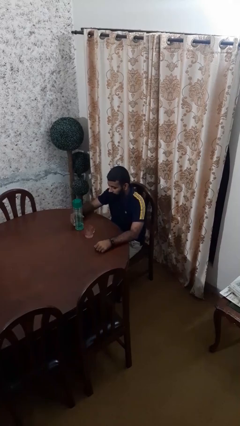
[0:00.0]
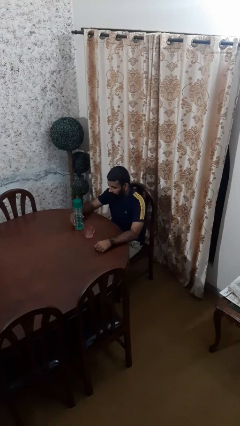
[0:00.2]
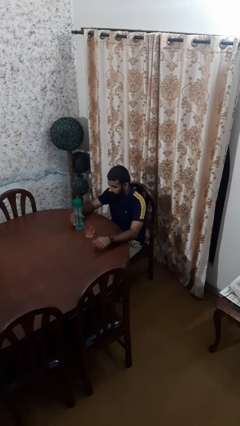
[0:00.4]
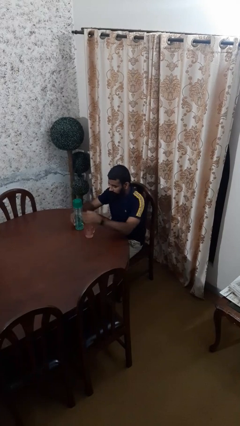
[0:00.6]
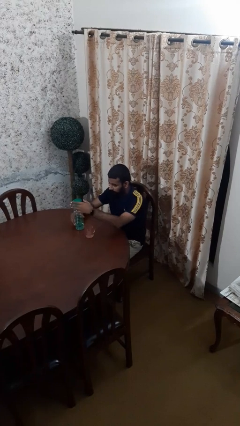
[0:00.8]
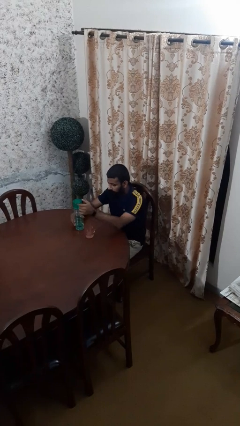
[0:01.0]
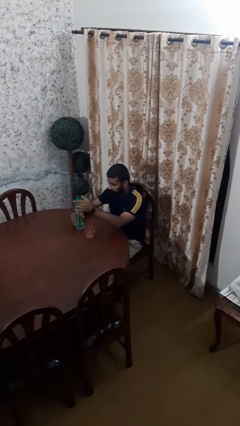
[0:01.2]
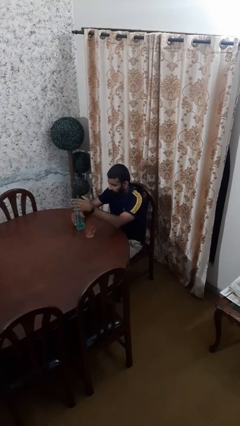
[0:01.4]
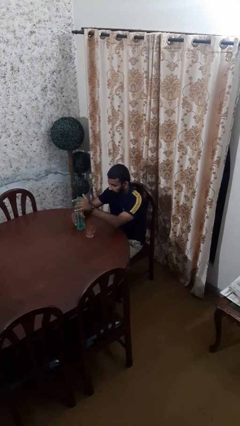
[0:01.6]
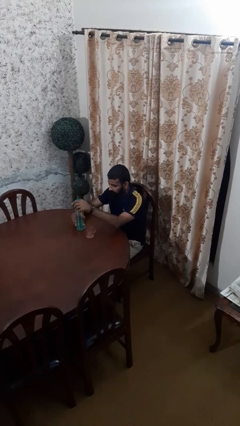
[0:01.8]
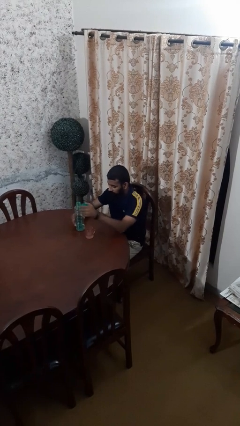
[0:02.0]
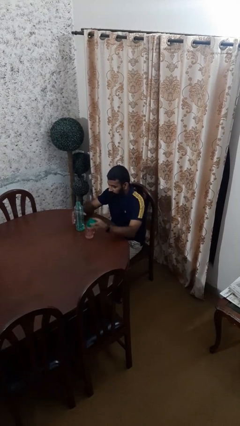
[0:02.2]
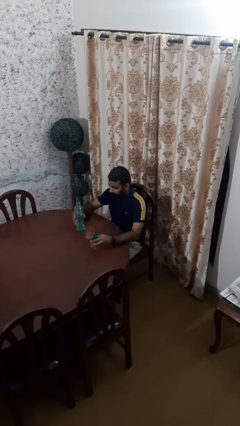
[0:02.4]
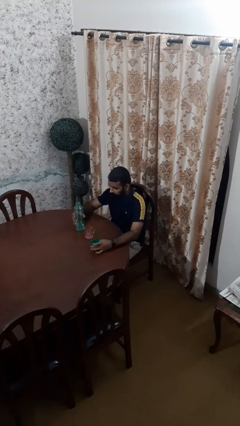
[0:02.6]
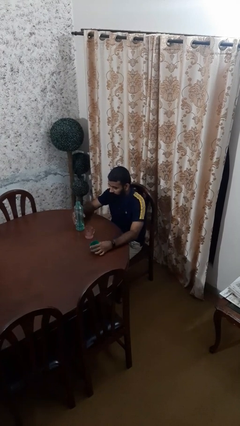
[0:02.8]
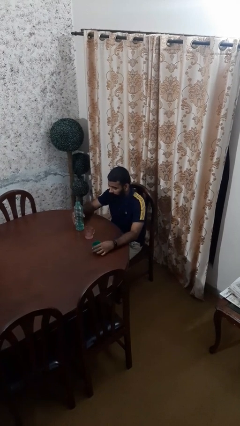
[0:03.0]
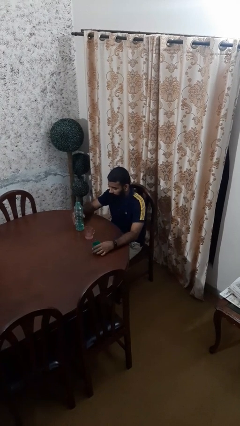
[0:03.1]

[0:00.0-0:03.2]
person unscrews lid from bottle

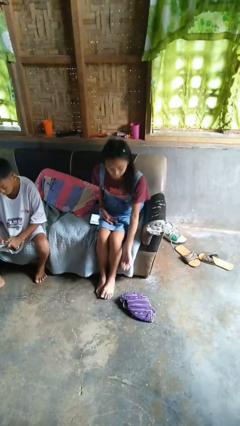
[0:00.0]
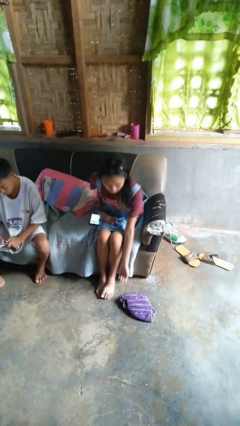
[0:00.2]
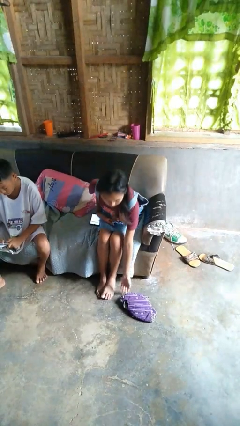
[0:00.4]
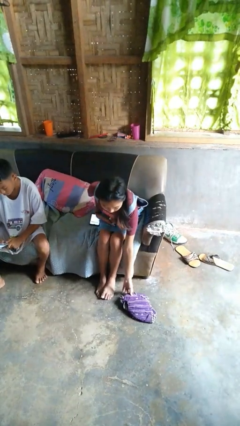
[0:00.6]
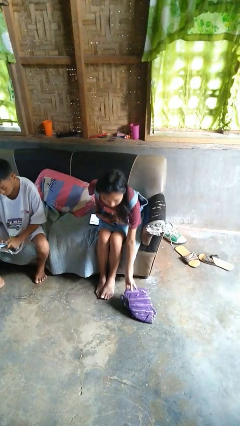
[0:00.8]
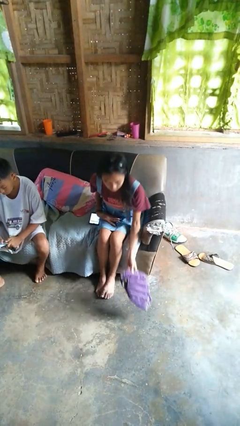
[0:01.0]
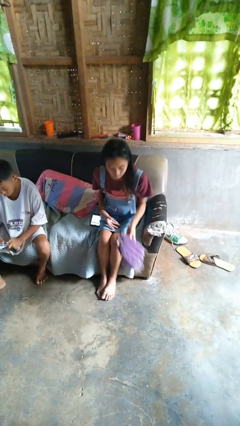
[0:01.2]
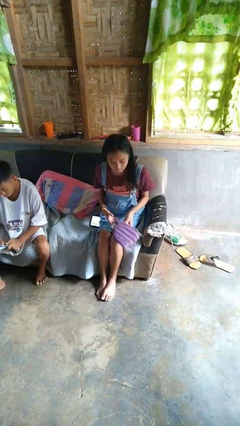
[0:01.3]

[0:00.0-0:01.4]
person picks up object from floor

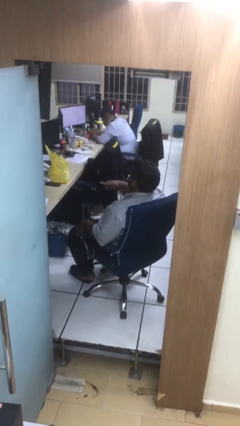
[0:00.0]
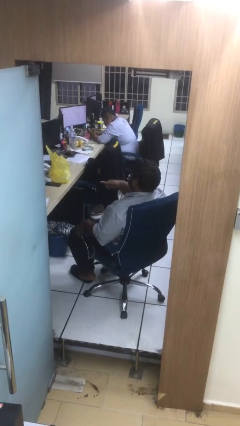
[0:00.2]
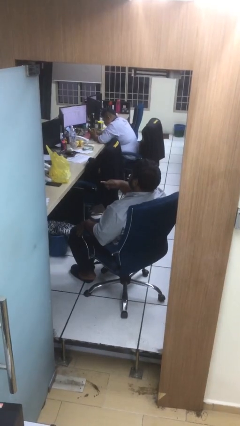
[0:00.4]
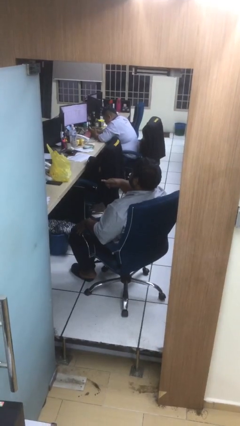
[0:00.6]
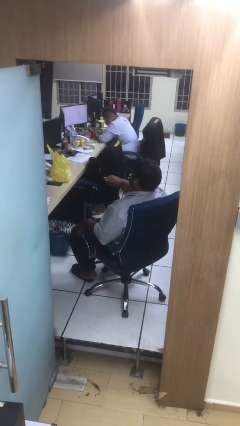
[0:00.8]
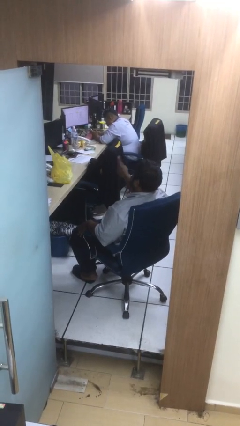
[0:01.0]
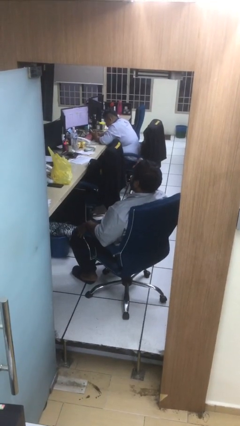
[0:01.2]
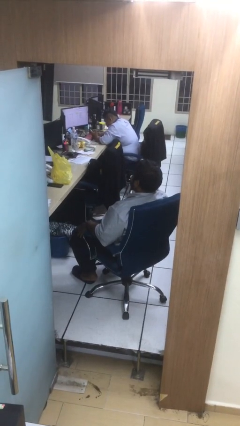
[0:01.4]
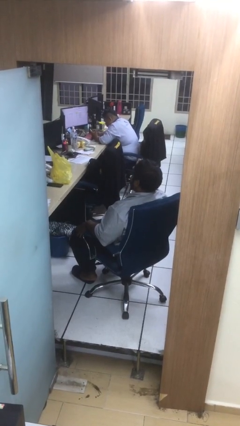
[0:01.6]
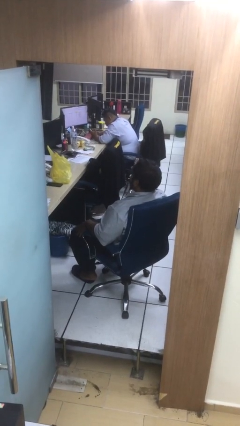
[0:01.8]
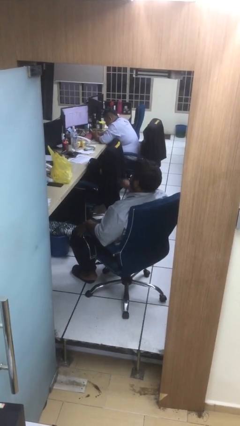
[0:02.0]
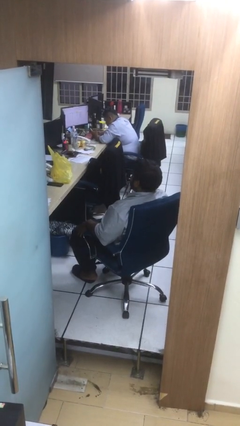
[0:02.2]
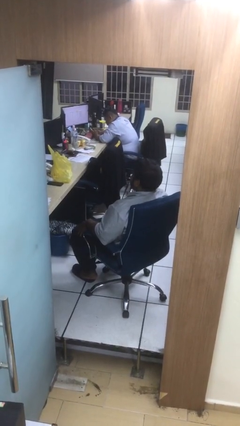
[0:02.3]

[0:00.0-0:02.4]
person gestures swipe right

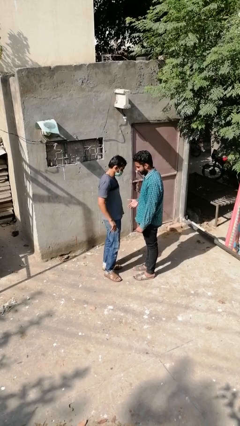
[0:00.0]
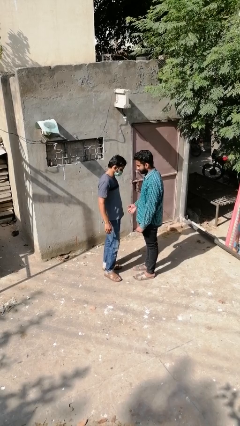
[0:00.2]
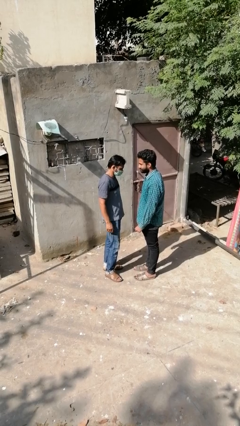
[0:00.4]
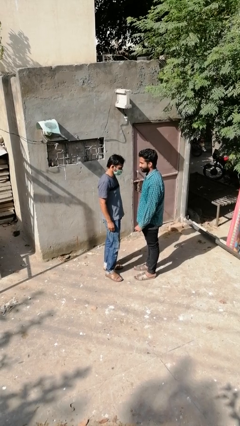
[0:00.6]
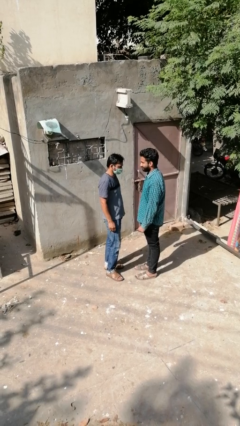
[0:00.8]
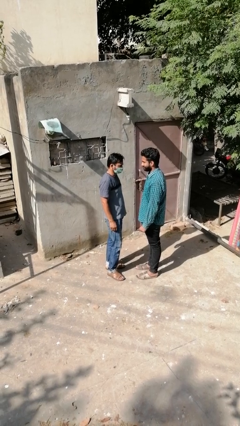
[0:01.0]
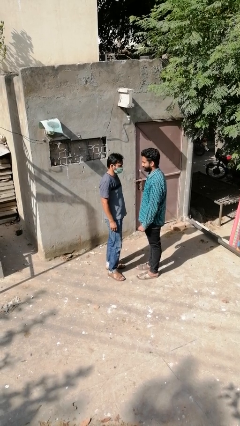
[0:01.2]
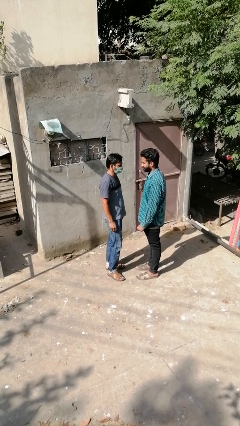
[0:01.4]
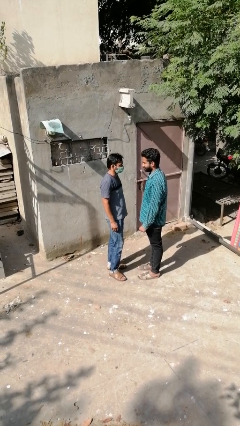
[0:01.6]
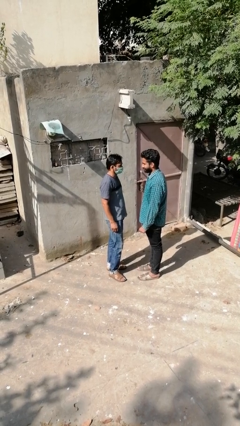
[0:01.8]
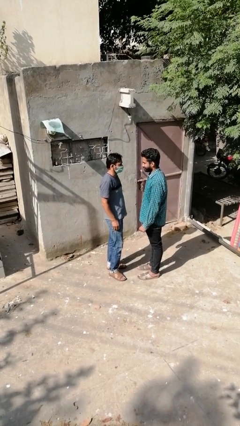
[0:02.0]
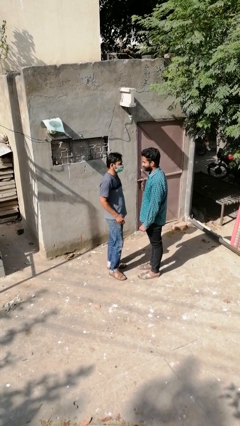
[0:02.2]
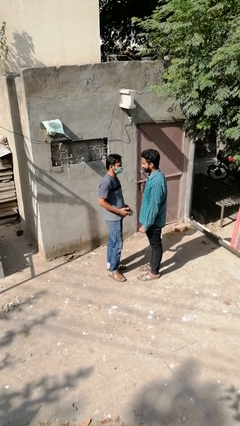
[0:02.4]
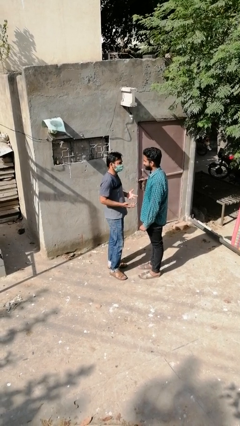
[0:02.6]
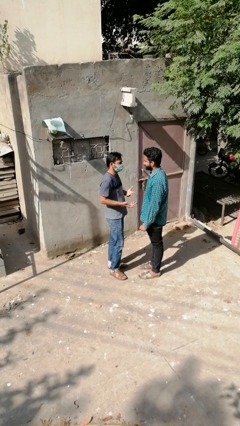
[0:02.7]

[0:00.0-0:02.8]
person highfives hand

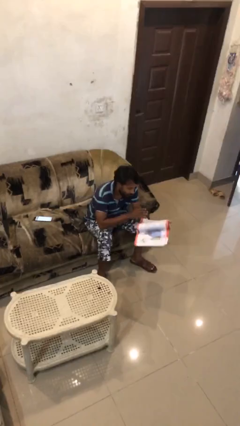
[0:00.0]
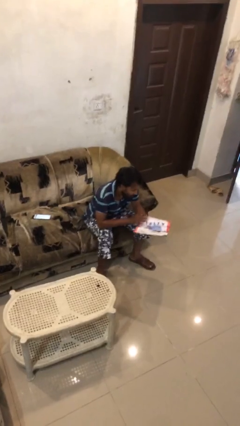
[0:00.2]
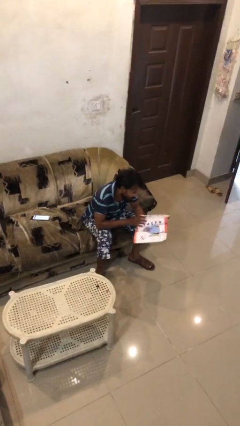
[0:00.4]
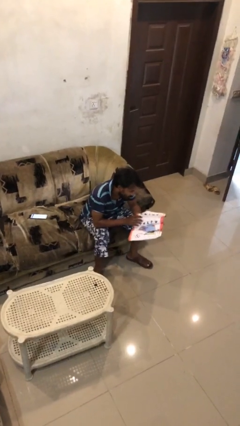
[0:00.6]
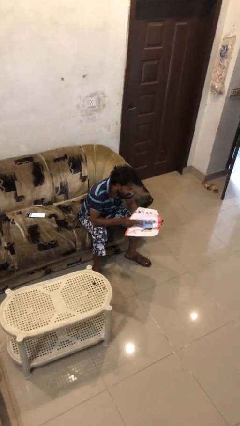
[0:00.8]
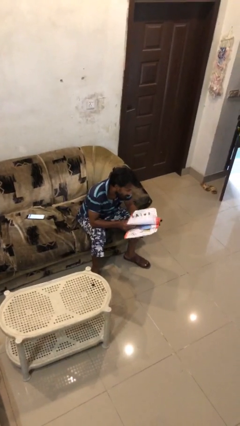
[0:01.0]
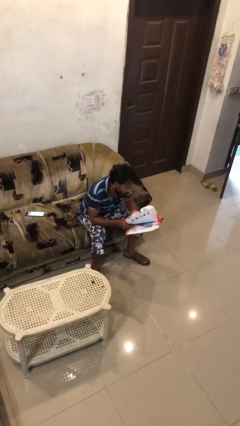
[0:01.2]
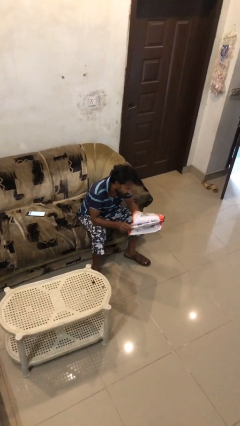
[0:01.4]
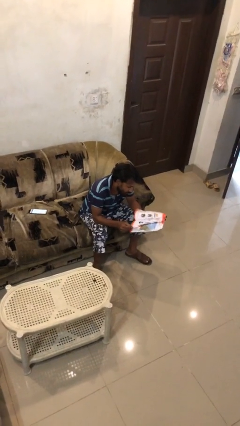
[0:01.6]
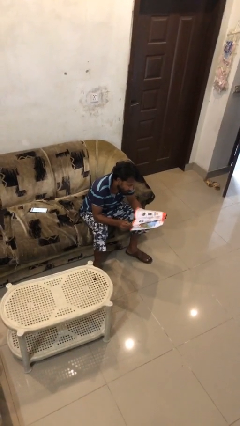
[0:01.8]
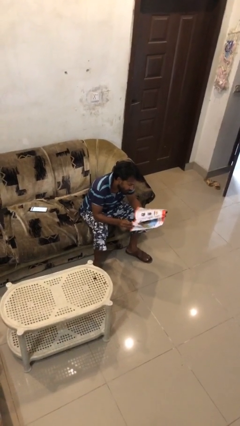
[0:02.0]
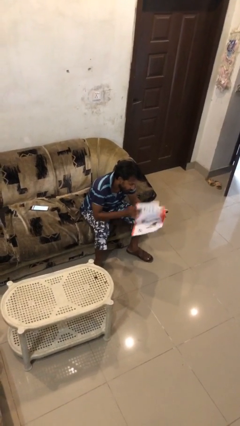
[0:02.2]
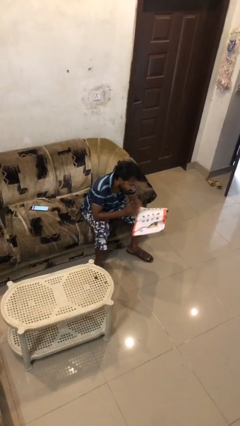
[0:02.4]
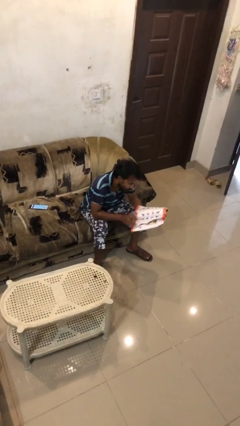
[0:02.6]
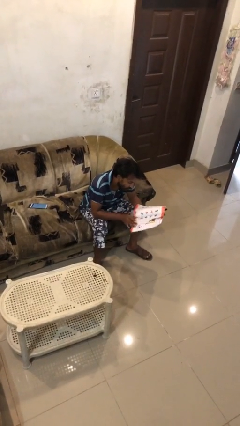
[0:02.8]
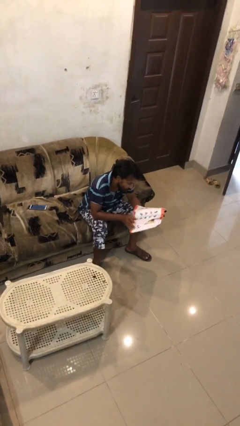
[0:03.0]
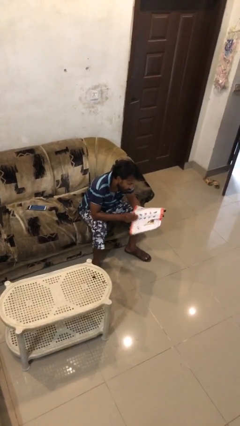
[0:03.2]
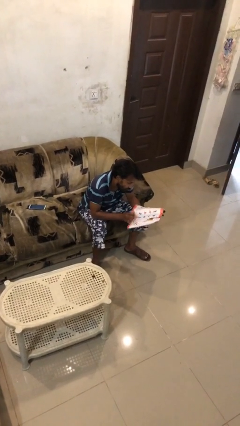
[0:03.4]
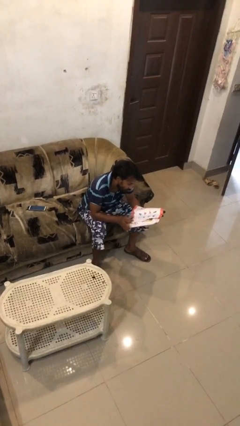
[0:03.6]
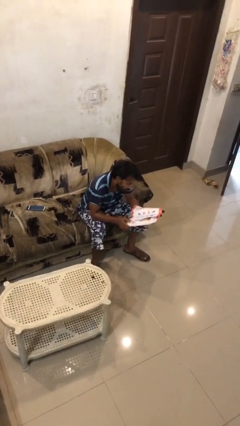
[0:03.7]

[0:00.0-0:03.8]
person reads document

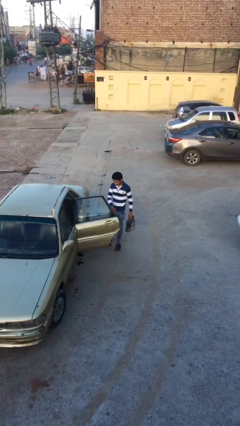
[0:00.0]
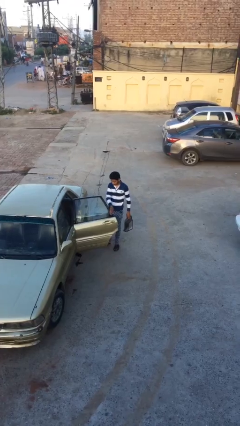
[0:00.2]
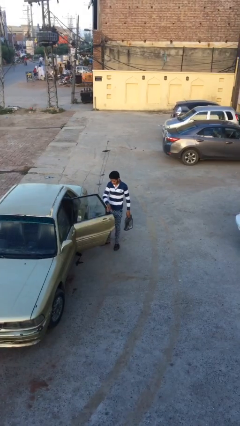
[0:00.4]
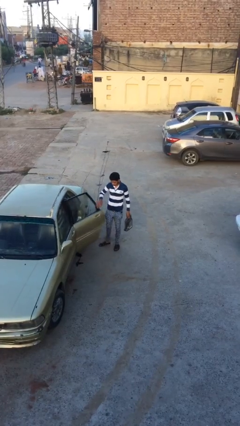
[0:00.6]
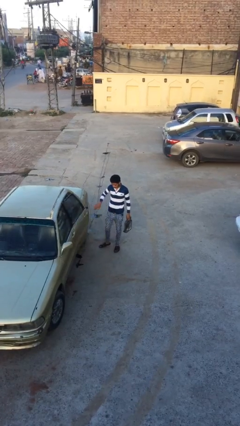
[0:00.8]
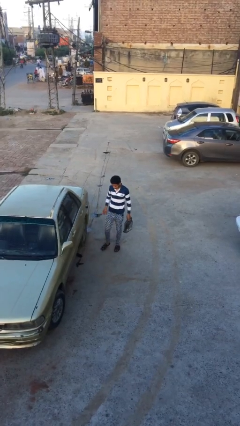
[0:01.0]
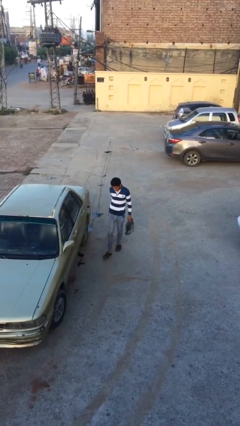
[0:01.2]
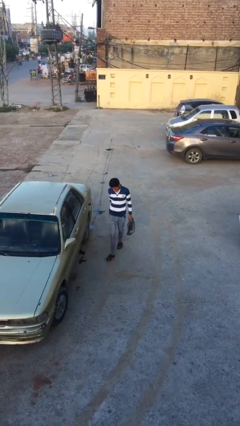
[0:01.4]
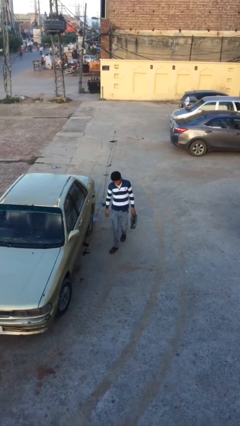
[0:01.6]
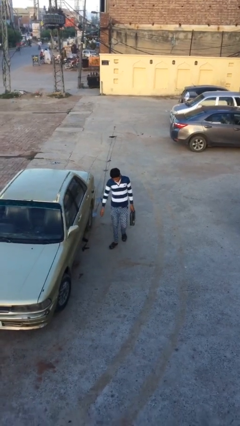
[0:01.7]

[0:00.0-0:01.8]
person closes car door

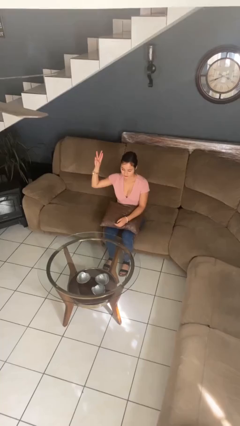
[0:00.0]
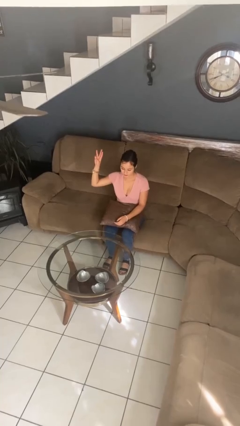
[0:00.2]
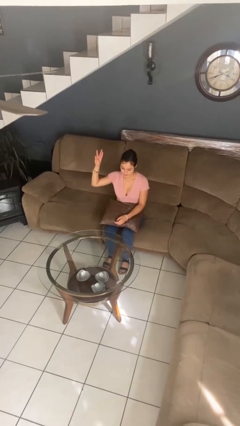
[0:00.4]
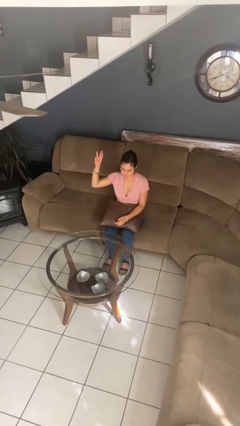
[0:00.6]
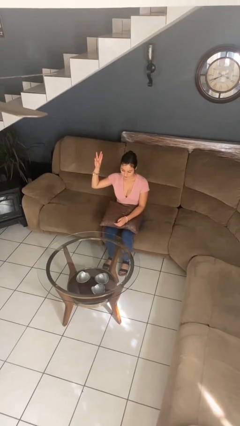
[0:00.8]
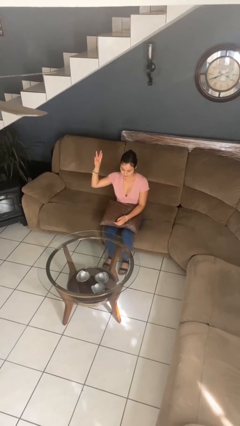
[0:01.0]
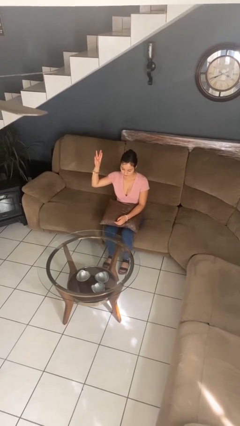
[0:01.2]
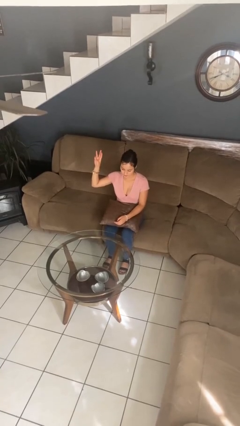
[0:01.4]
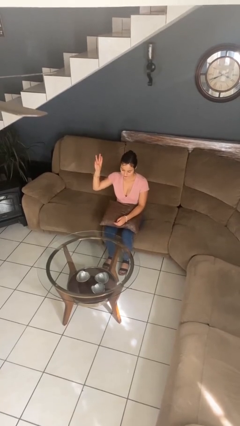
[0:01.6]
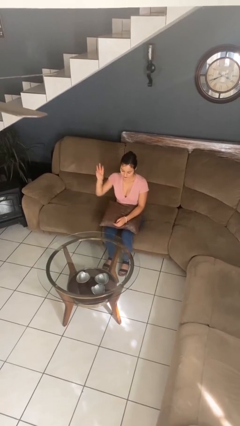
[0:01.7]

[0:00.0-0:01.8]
person gestures number three
